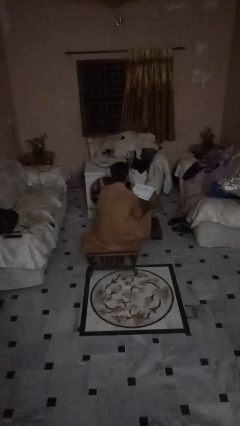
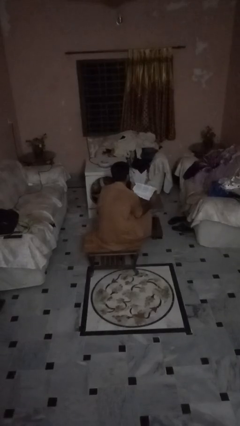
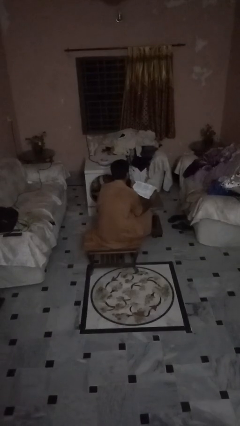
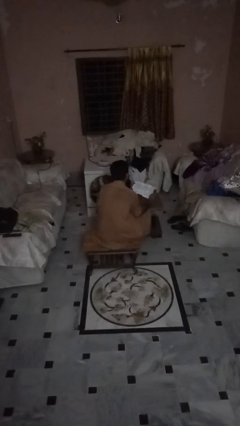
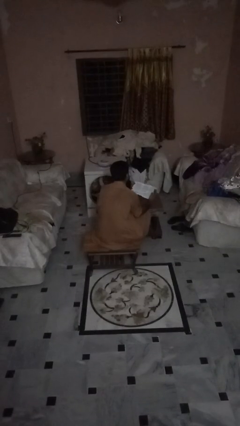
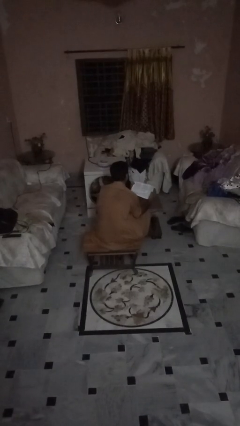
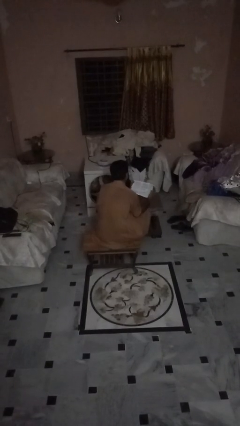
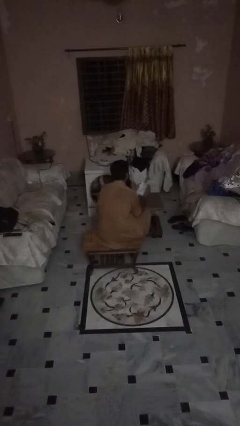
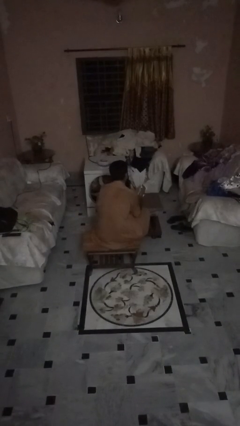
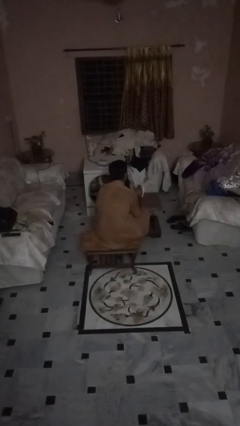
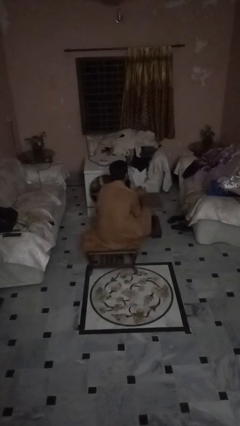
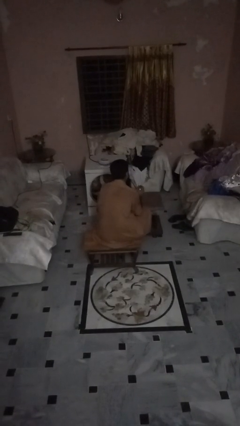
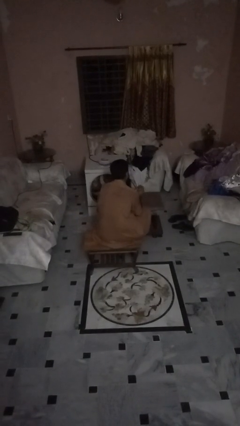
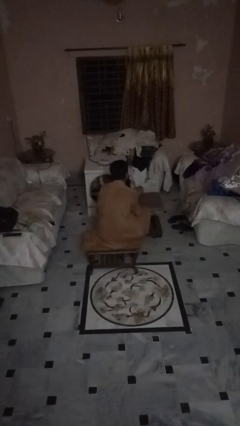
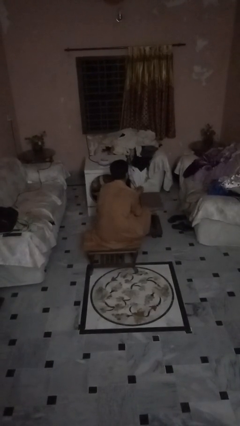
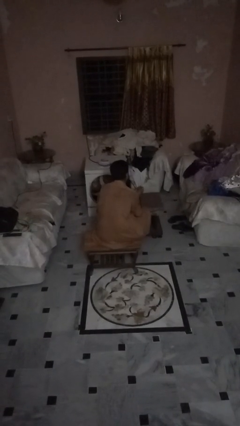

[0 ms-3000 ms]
person crumples paper

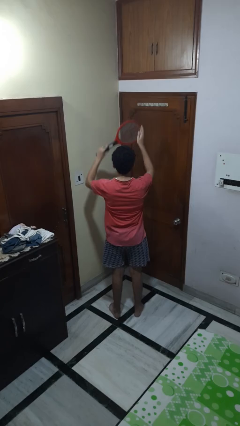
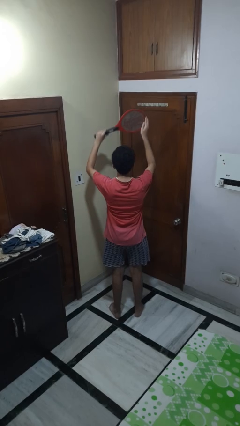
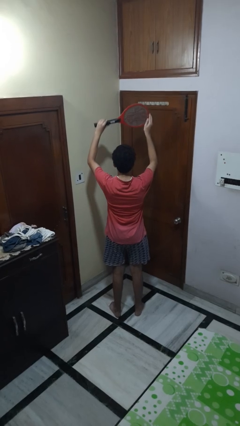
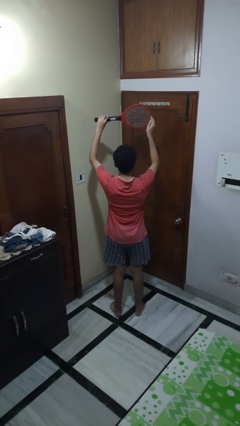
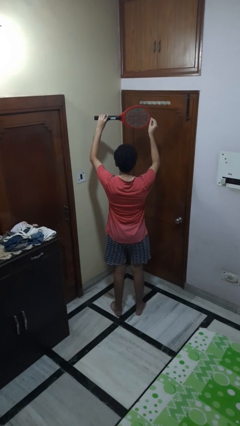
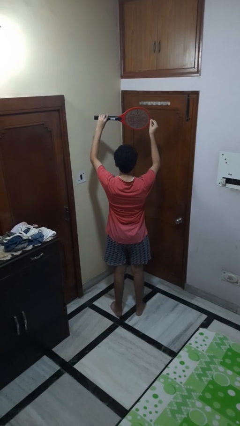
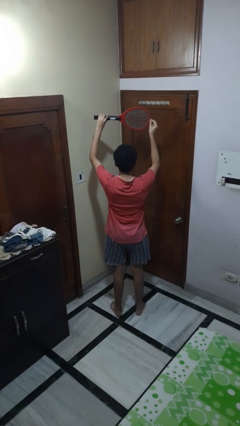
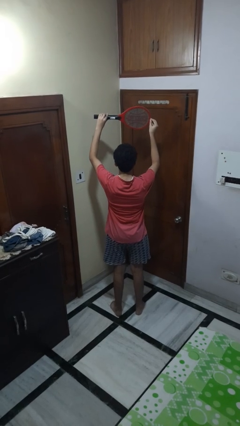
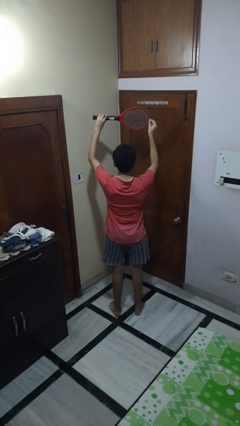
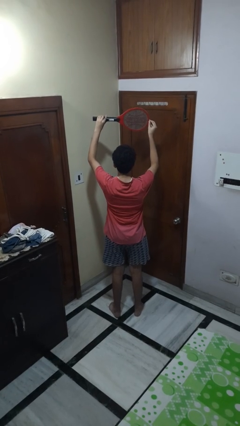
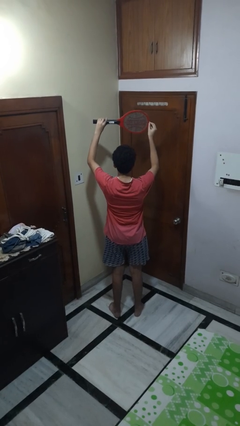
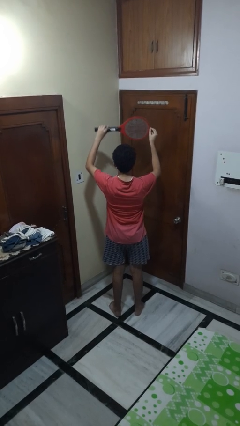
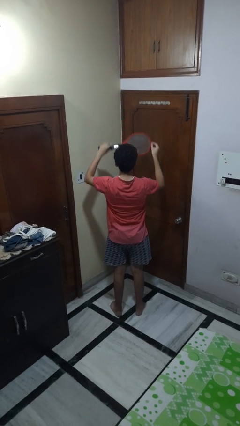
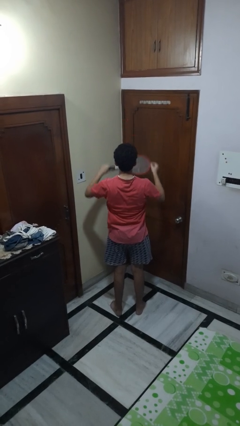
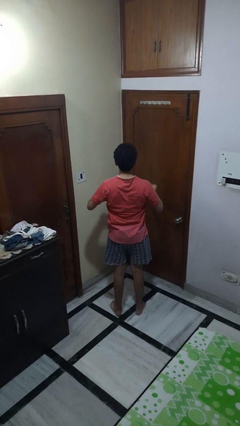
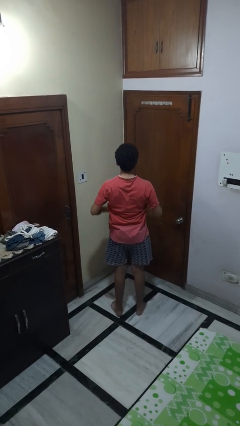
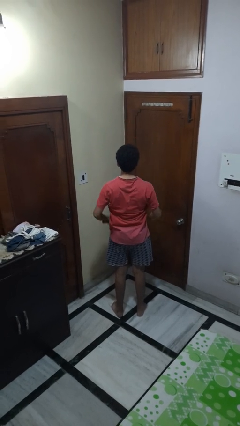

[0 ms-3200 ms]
person holds object above head

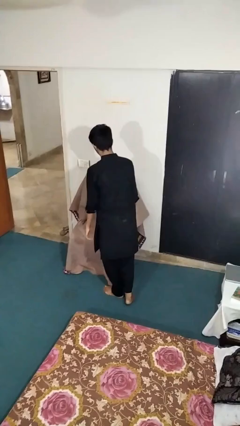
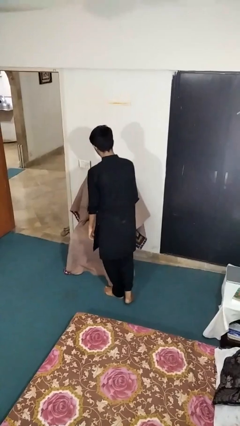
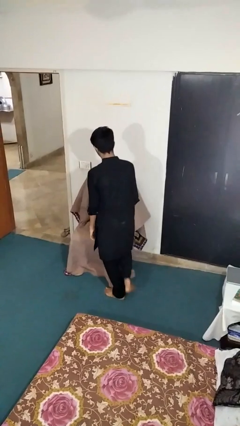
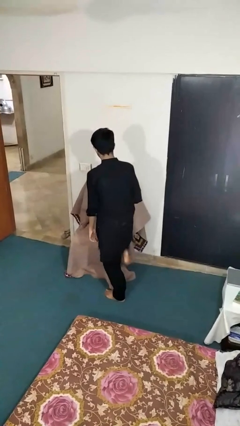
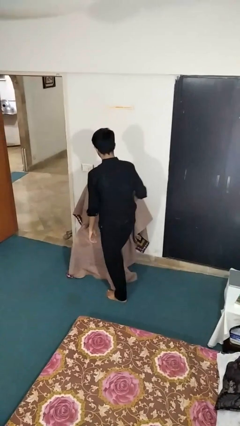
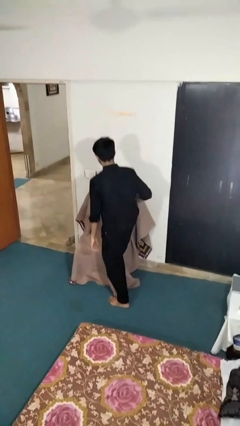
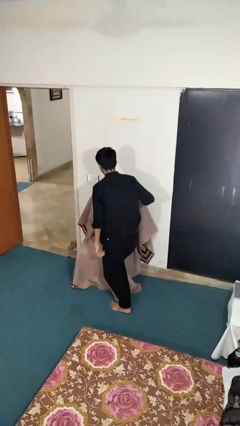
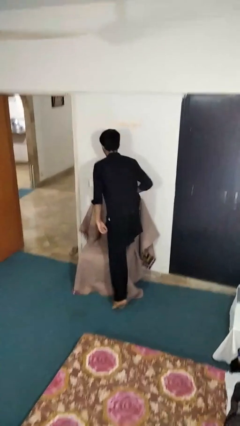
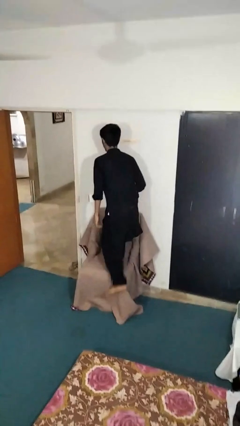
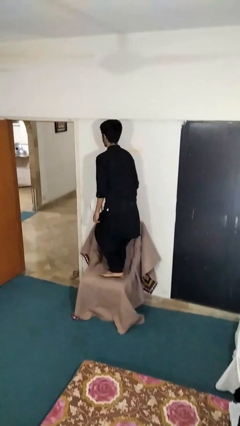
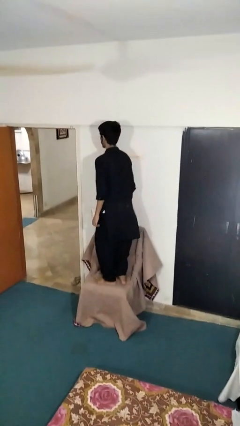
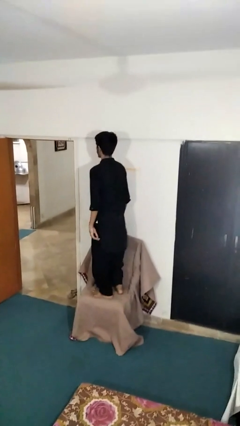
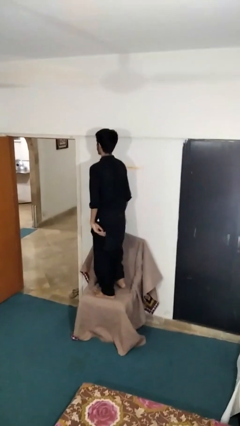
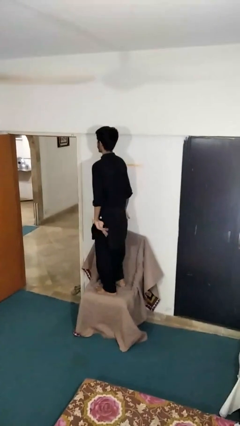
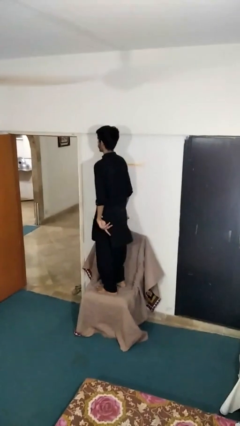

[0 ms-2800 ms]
person climbs on couch

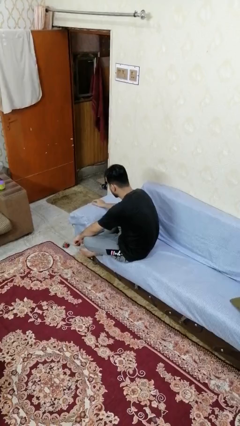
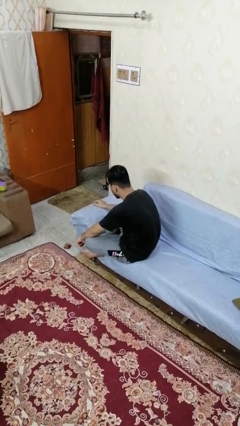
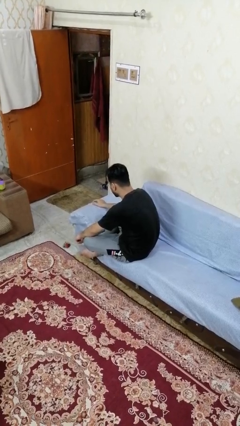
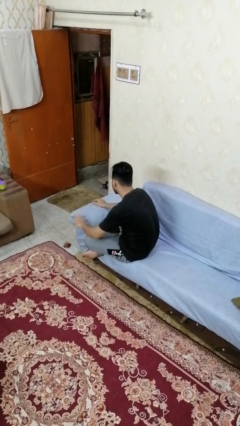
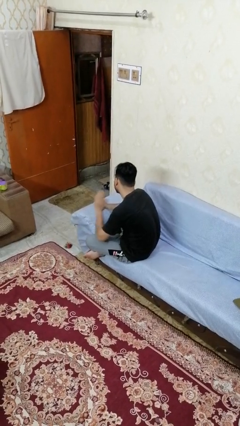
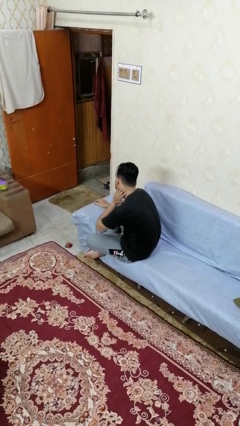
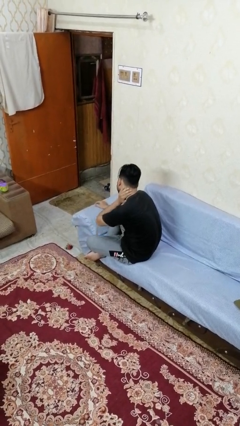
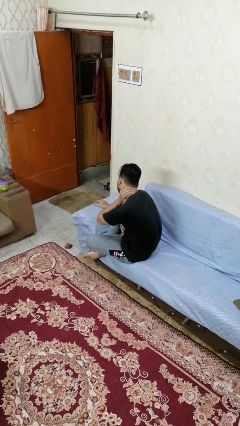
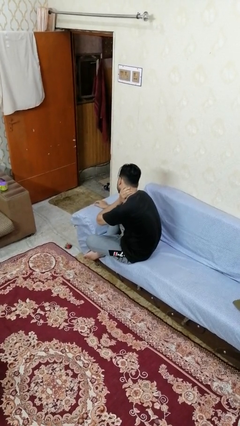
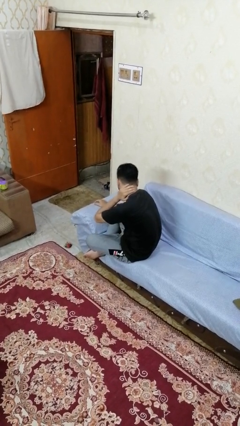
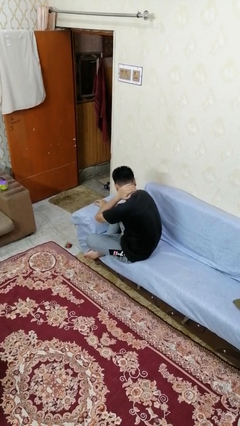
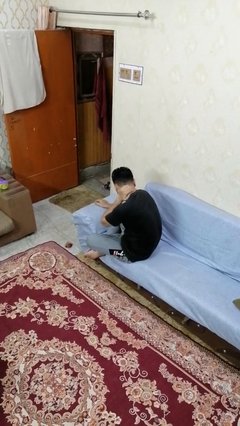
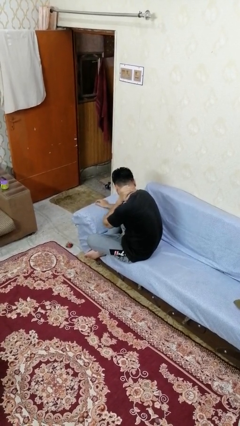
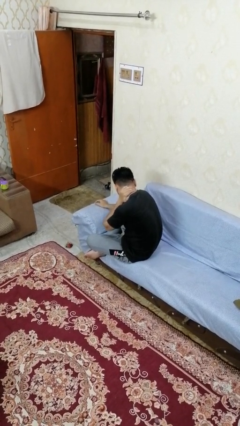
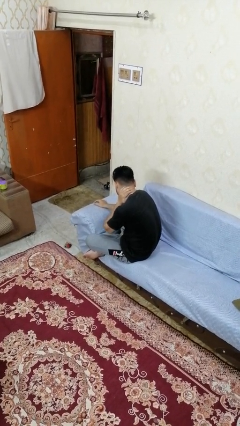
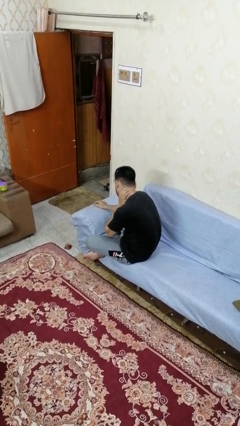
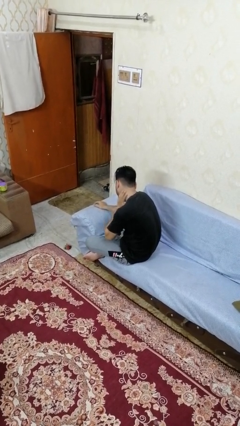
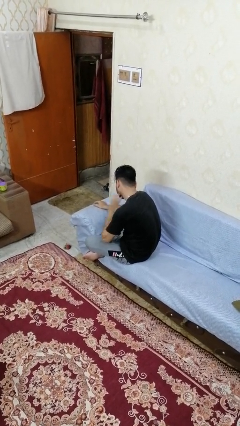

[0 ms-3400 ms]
person rubs neck

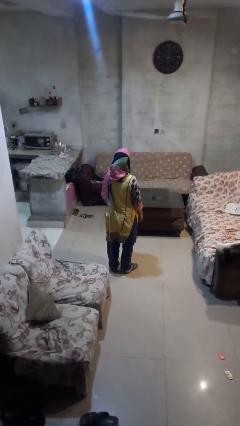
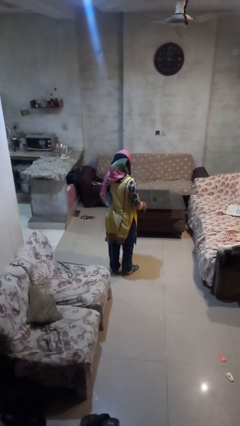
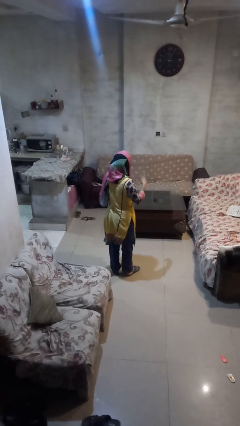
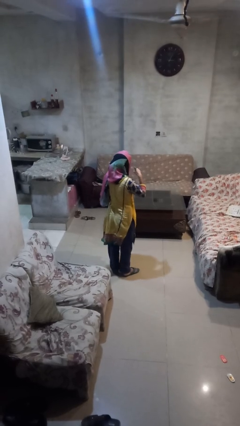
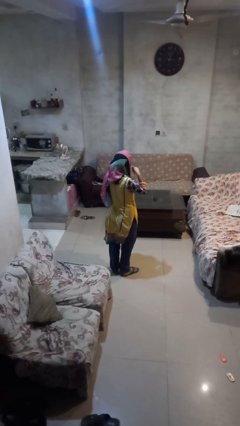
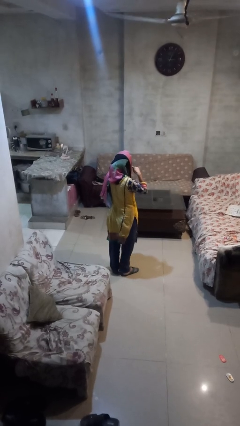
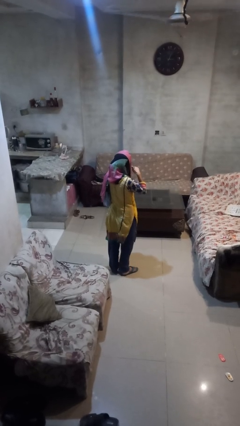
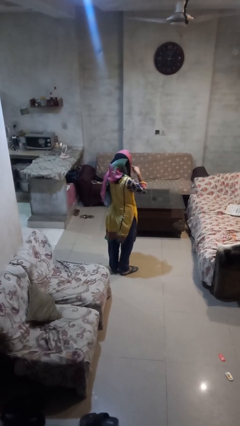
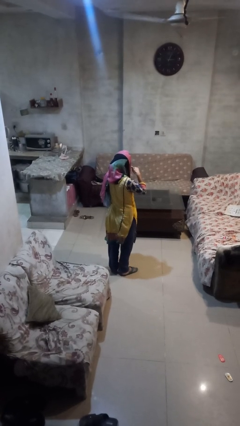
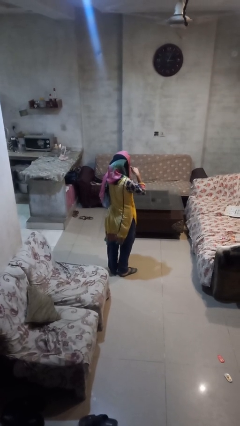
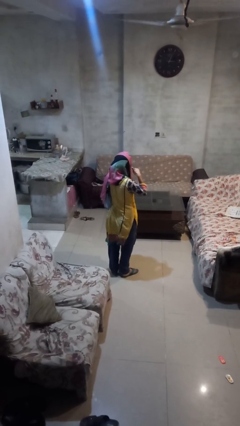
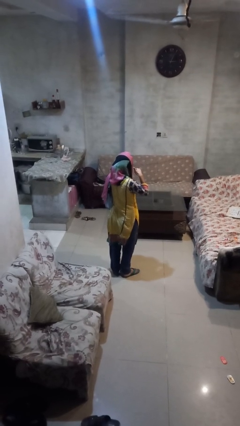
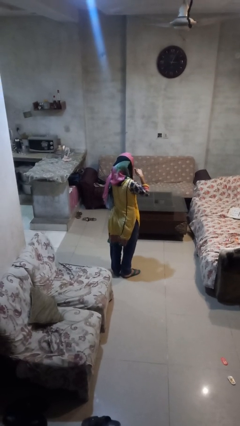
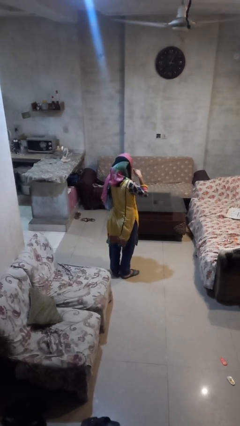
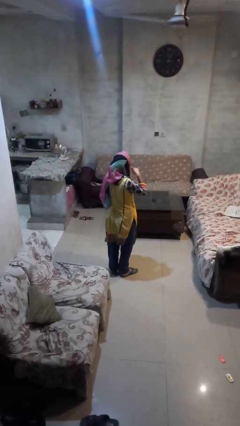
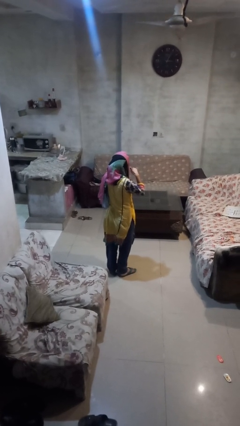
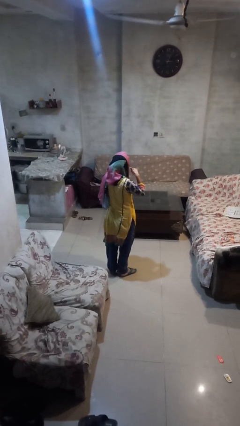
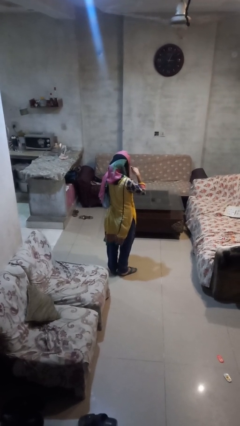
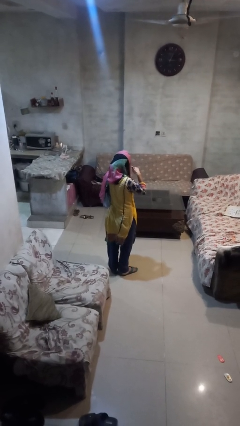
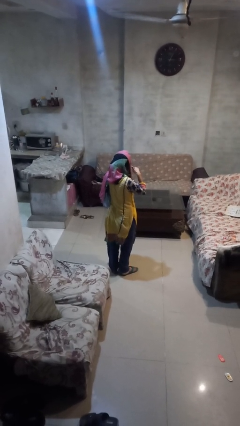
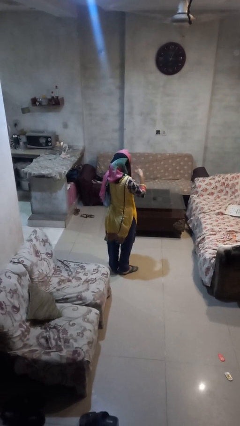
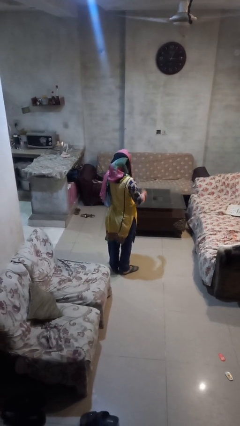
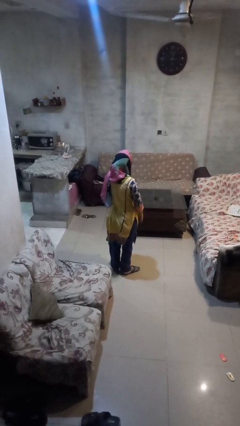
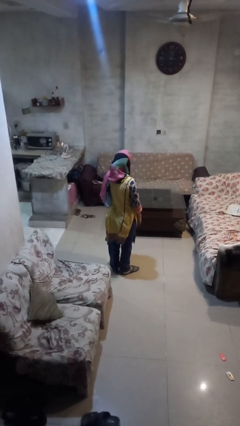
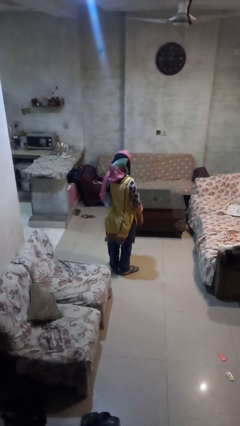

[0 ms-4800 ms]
person gestures call me

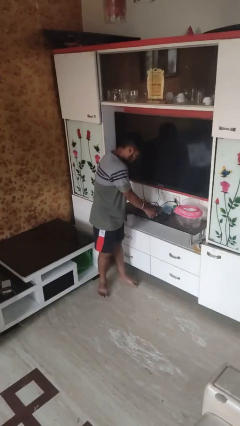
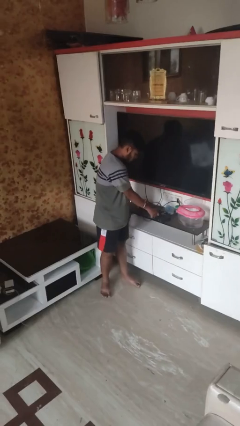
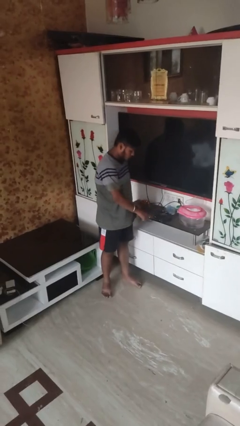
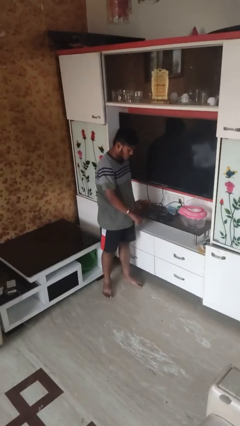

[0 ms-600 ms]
person unplugs from electrical socket
